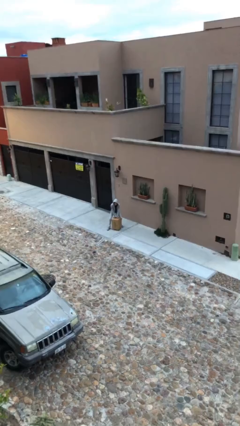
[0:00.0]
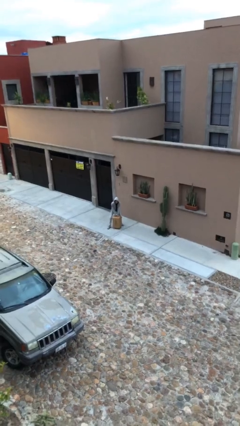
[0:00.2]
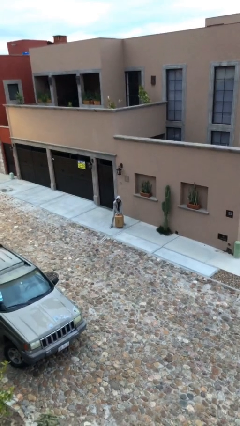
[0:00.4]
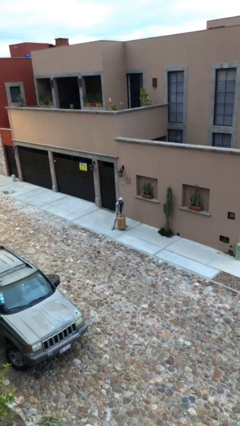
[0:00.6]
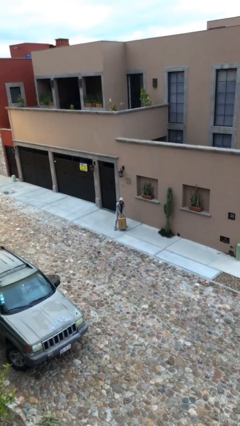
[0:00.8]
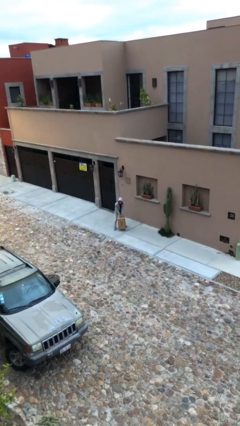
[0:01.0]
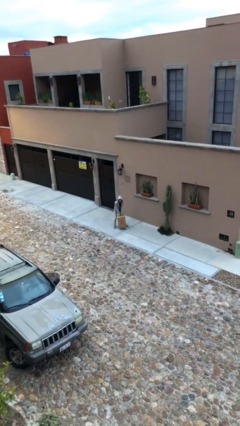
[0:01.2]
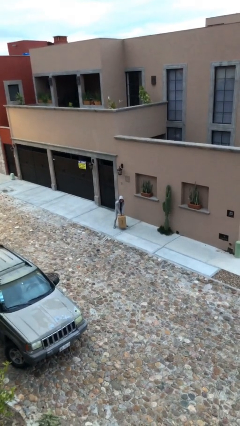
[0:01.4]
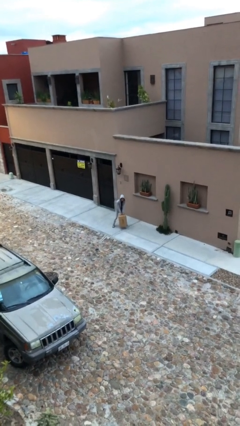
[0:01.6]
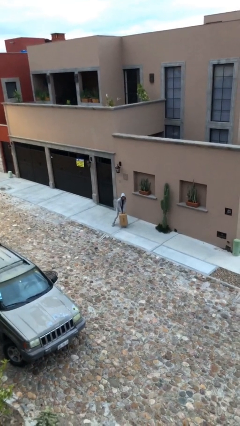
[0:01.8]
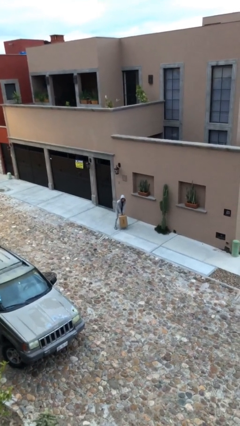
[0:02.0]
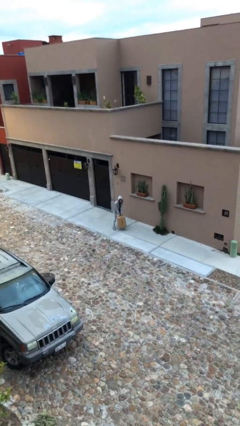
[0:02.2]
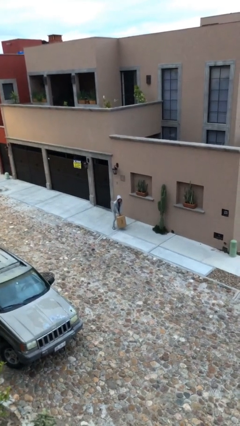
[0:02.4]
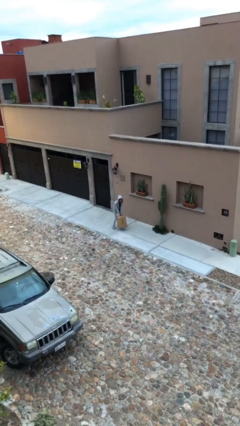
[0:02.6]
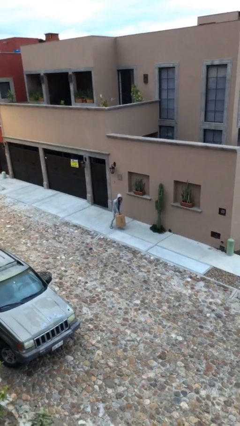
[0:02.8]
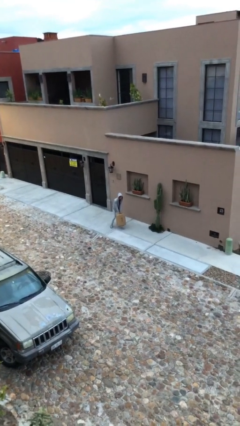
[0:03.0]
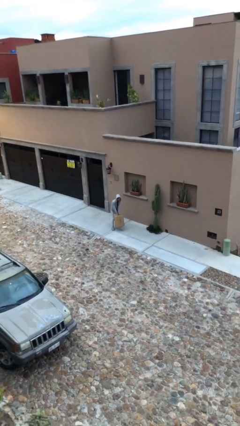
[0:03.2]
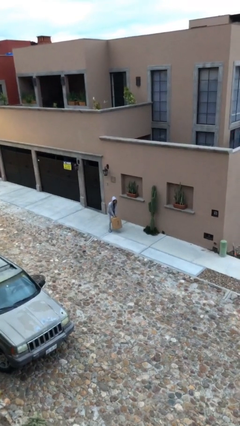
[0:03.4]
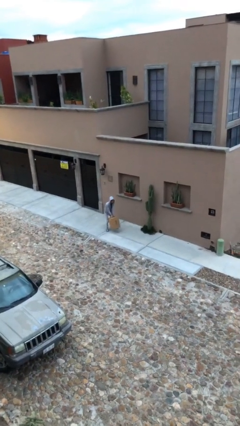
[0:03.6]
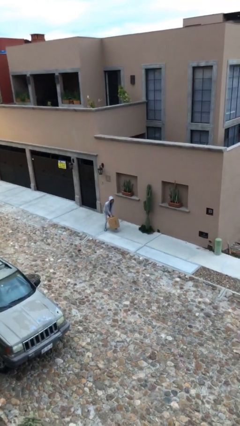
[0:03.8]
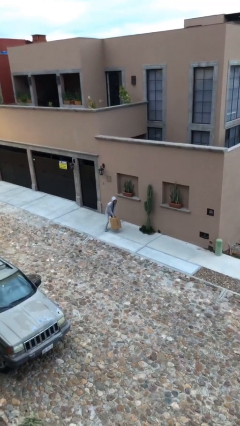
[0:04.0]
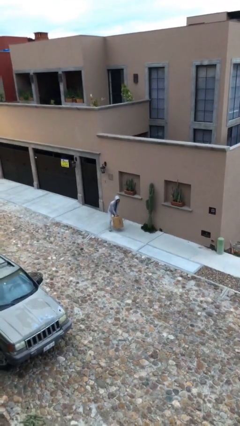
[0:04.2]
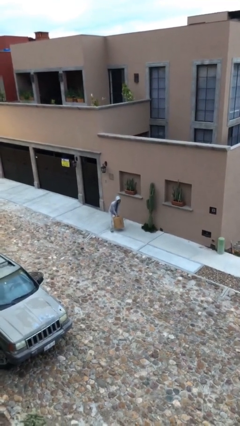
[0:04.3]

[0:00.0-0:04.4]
person carries heavy object

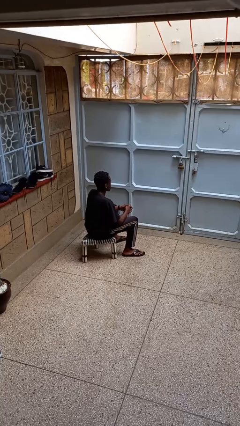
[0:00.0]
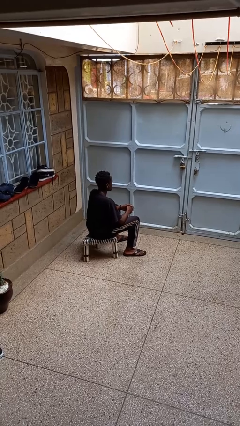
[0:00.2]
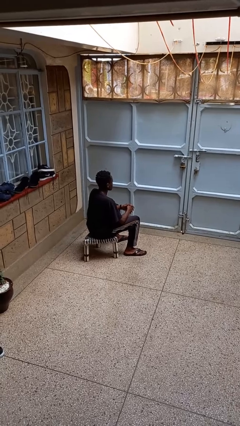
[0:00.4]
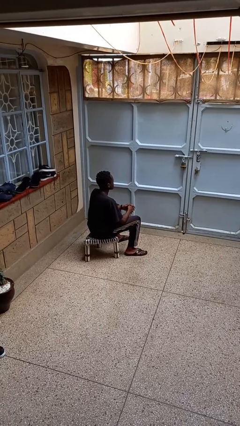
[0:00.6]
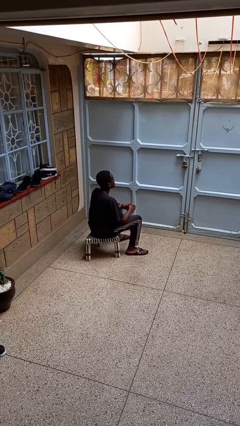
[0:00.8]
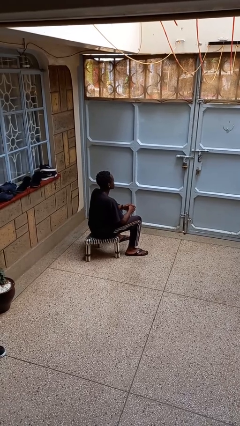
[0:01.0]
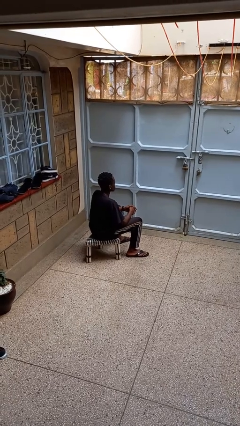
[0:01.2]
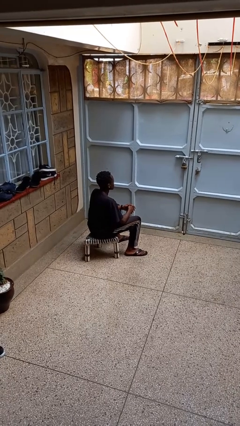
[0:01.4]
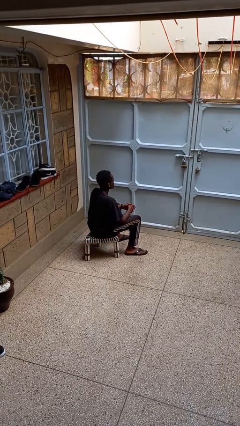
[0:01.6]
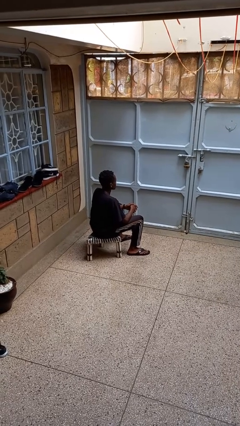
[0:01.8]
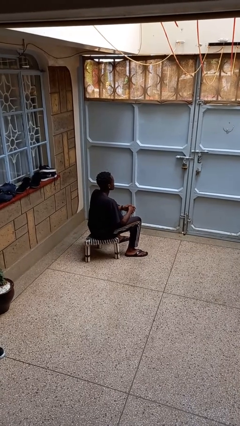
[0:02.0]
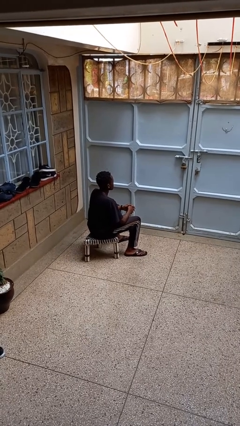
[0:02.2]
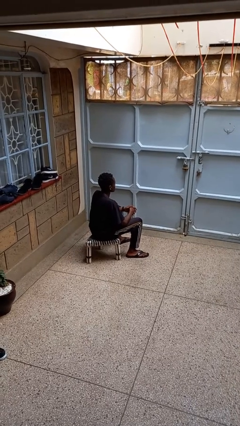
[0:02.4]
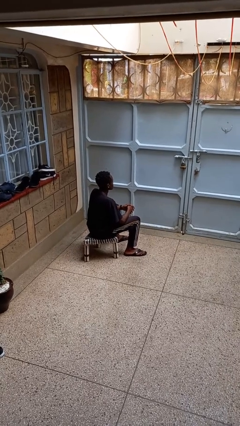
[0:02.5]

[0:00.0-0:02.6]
person nods head

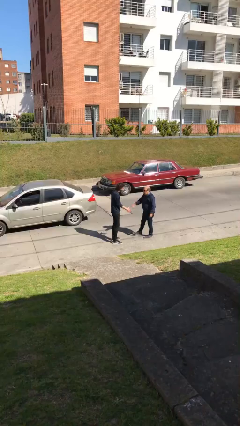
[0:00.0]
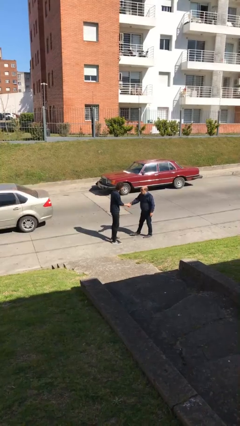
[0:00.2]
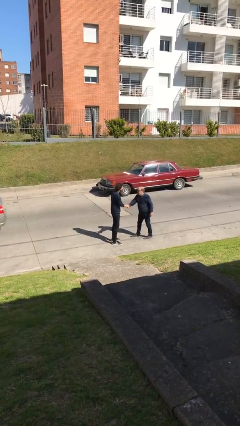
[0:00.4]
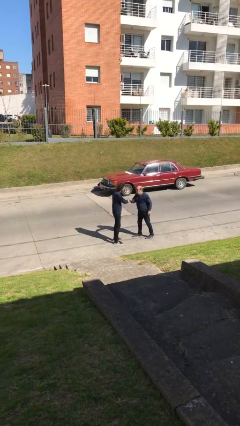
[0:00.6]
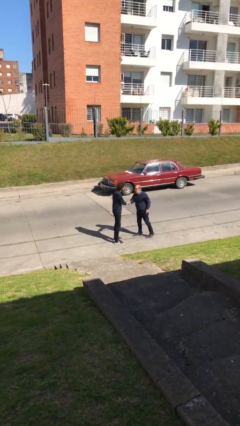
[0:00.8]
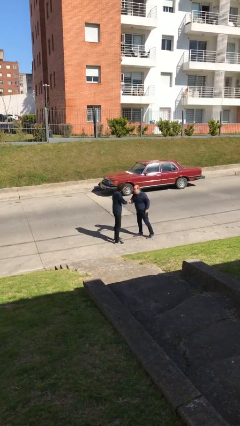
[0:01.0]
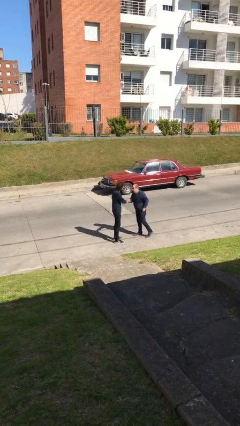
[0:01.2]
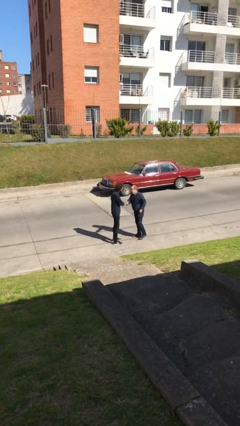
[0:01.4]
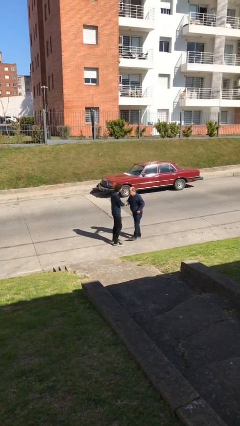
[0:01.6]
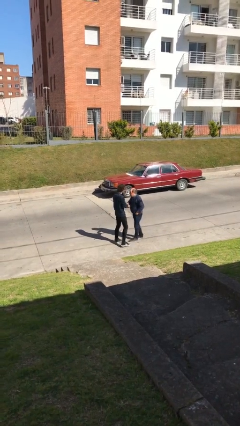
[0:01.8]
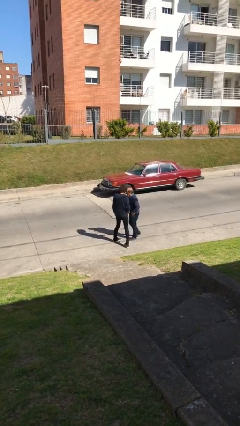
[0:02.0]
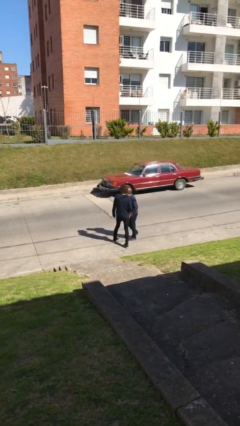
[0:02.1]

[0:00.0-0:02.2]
person shakes hand

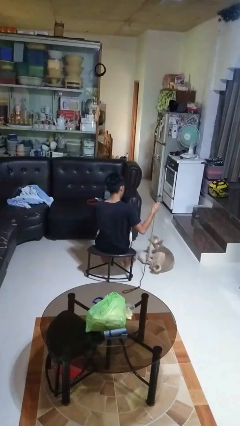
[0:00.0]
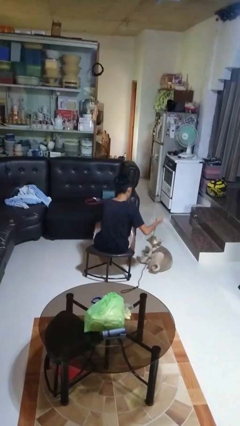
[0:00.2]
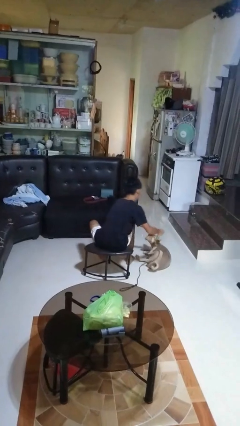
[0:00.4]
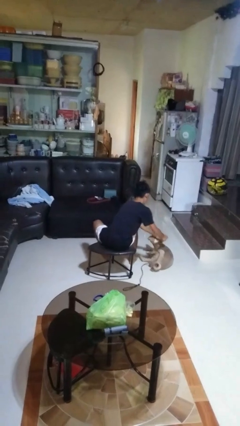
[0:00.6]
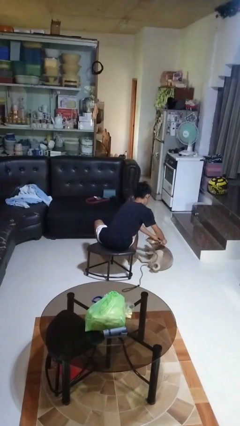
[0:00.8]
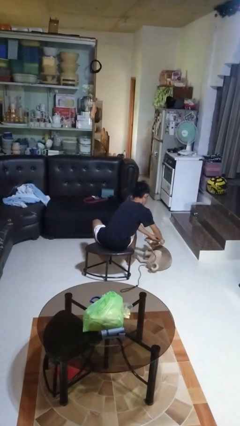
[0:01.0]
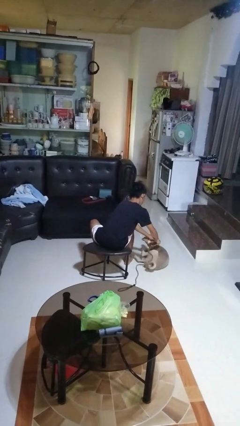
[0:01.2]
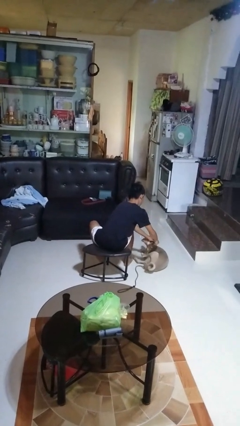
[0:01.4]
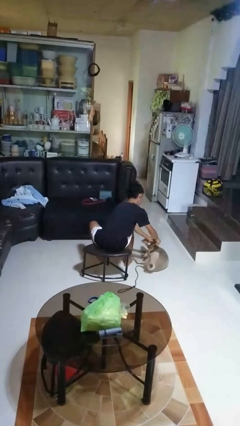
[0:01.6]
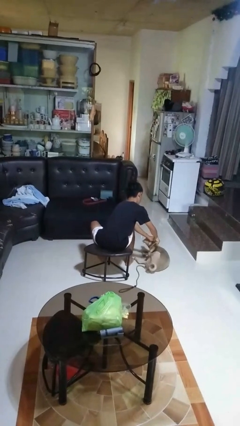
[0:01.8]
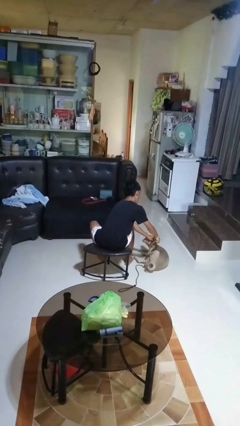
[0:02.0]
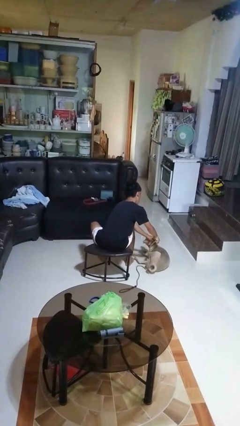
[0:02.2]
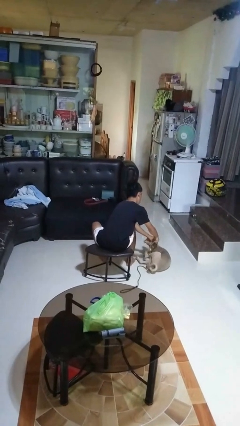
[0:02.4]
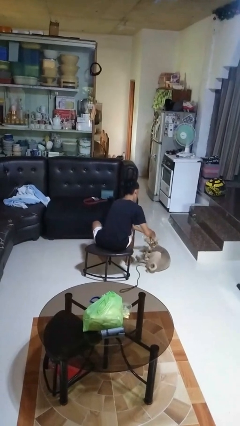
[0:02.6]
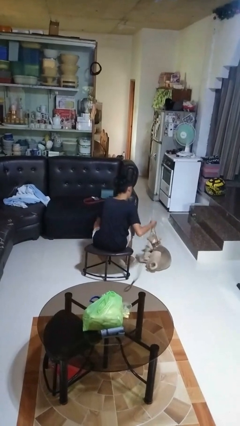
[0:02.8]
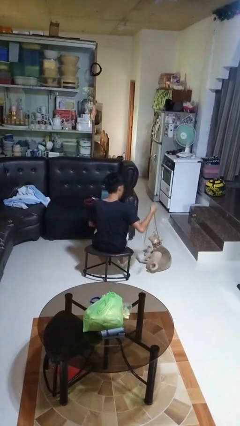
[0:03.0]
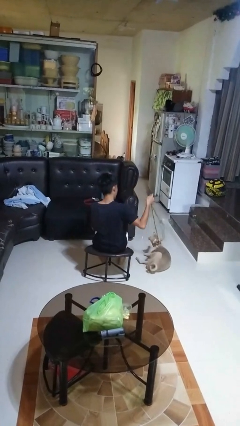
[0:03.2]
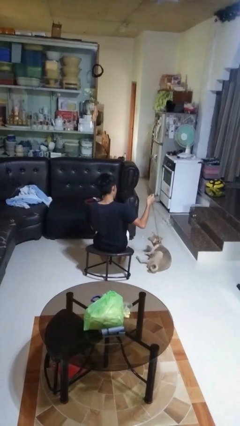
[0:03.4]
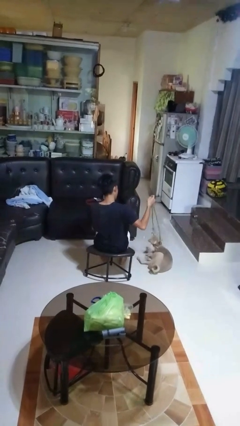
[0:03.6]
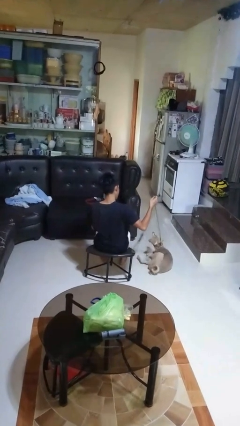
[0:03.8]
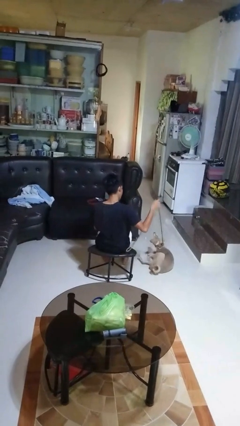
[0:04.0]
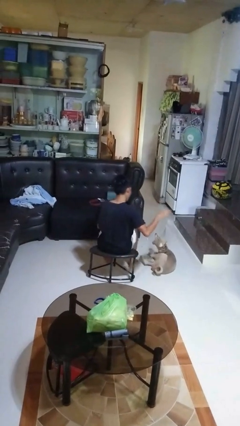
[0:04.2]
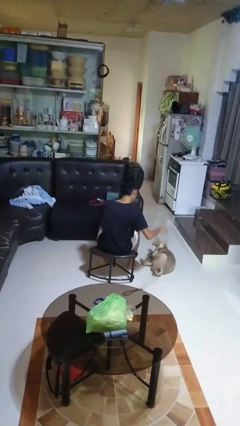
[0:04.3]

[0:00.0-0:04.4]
person attaches leash to dog

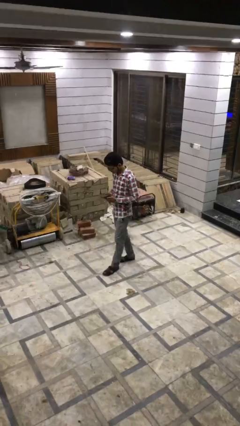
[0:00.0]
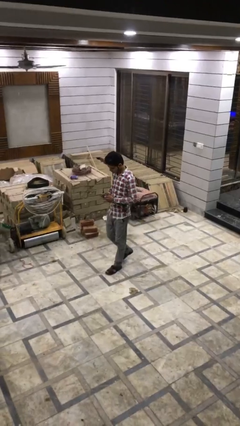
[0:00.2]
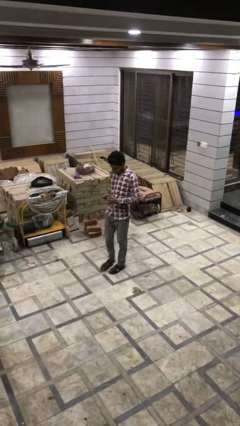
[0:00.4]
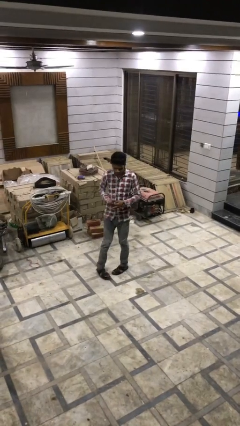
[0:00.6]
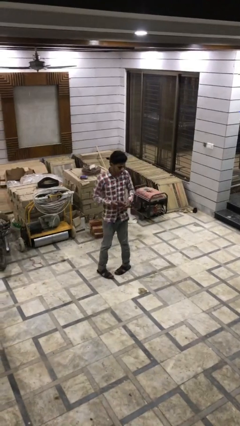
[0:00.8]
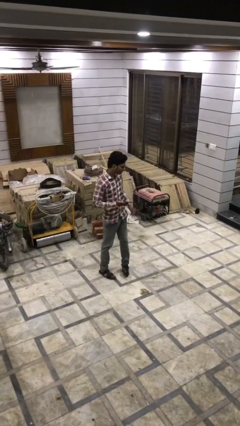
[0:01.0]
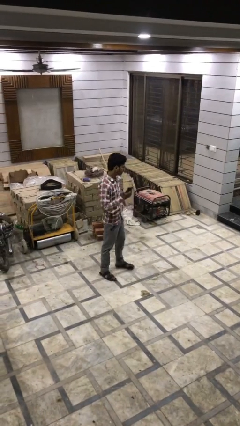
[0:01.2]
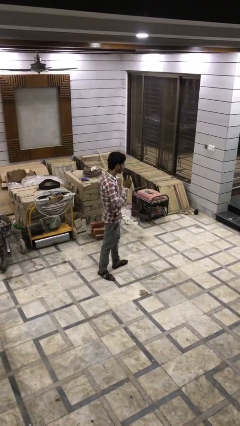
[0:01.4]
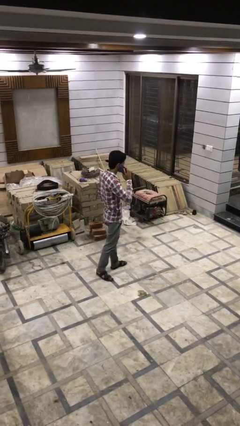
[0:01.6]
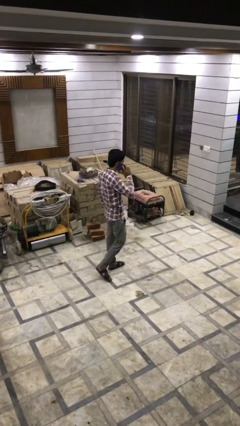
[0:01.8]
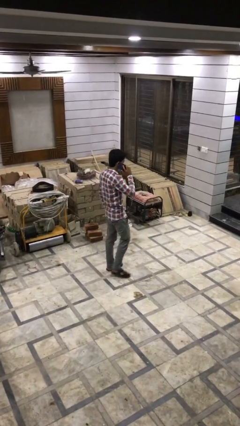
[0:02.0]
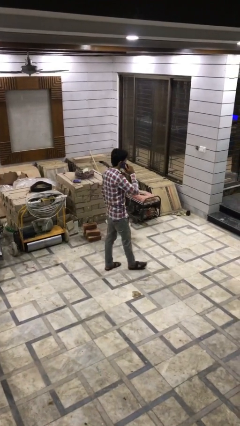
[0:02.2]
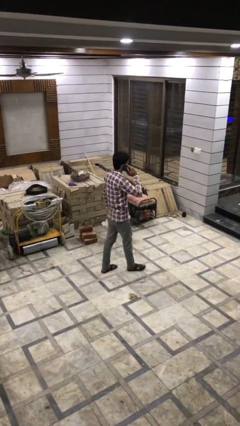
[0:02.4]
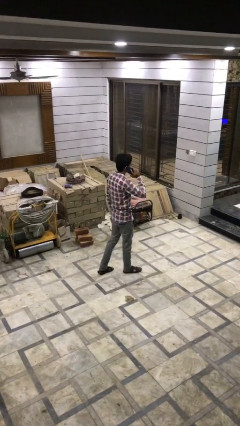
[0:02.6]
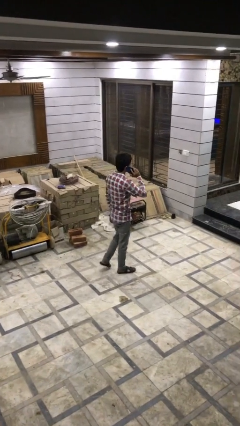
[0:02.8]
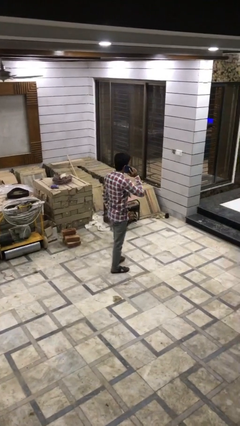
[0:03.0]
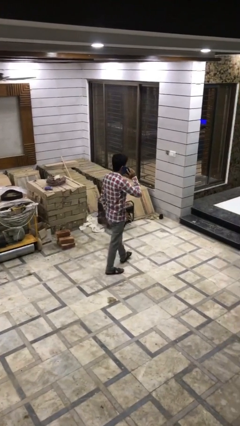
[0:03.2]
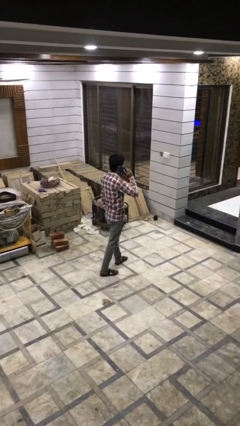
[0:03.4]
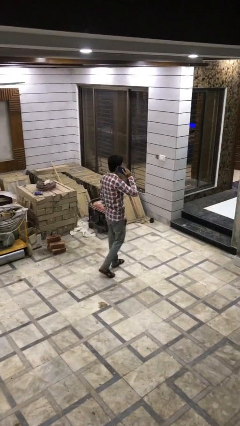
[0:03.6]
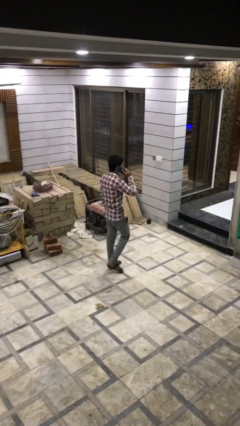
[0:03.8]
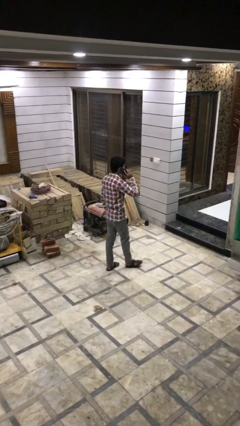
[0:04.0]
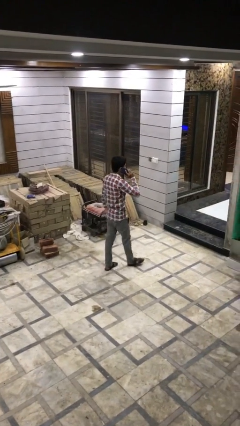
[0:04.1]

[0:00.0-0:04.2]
person talks on phone
